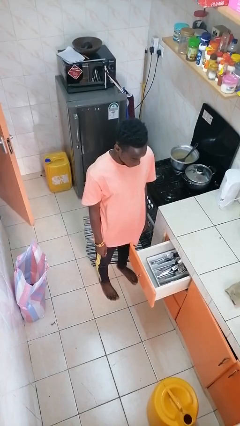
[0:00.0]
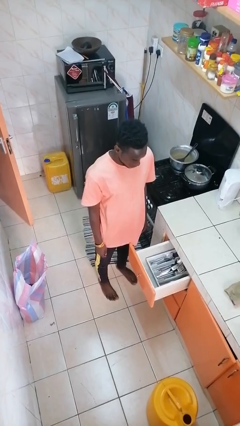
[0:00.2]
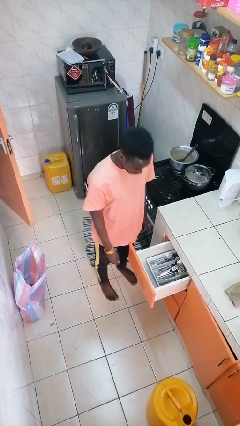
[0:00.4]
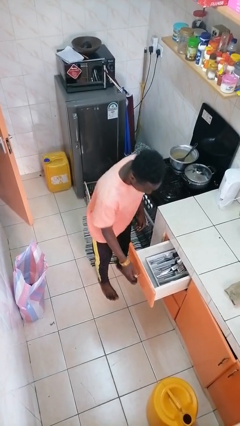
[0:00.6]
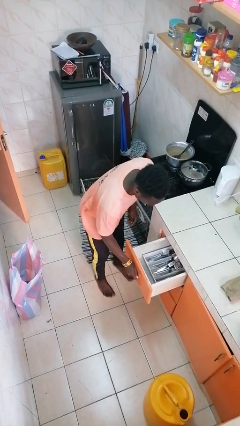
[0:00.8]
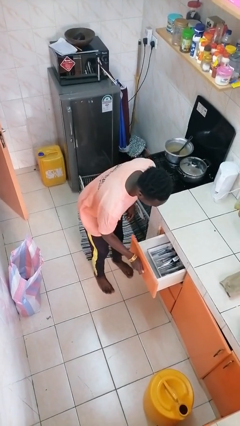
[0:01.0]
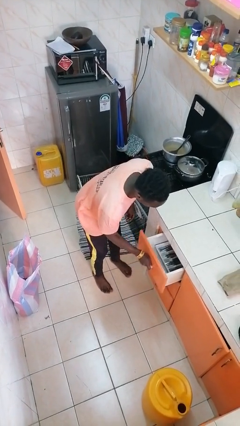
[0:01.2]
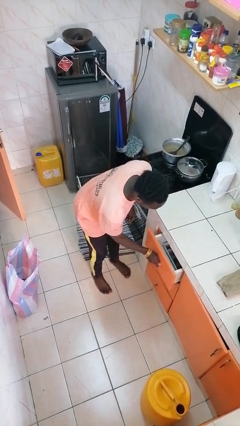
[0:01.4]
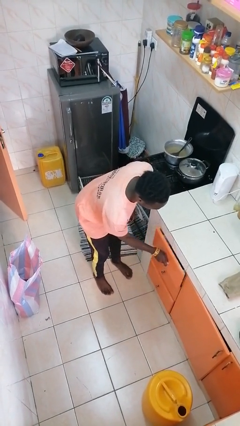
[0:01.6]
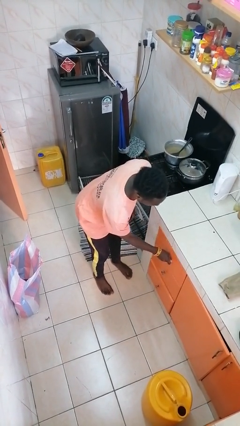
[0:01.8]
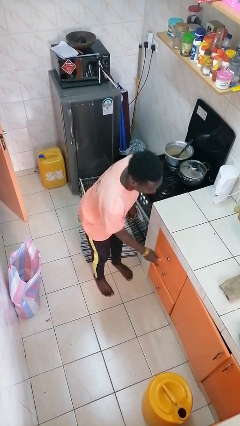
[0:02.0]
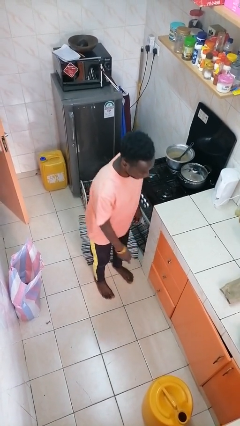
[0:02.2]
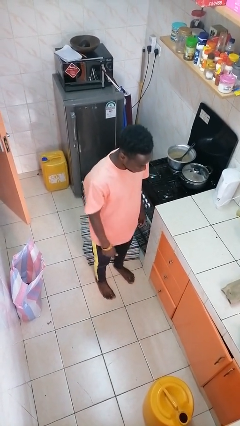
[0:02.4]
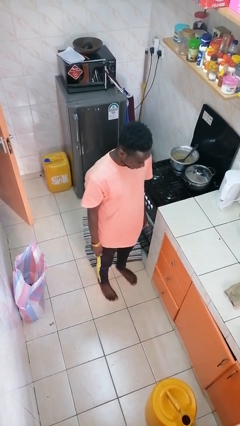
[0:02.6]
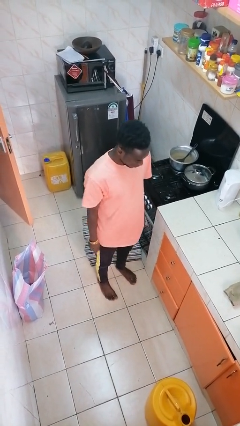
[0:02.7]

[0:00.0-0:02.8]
person closes kitchen drawer

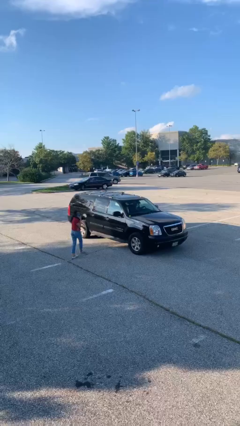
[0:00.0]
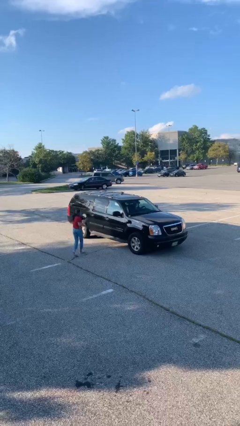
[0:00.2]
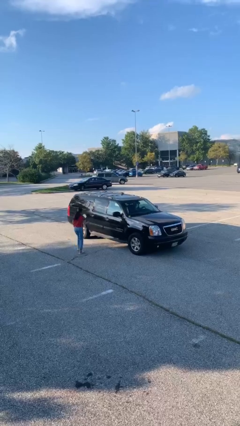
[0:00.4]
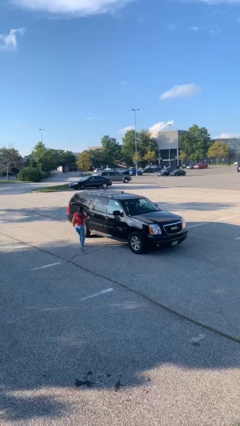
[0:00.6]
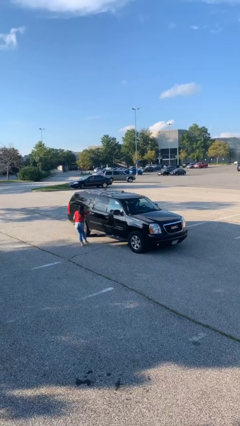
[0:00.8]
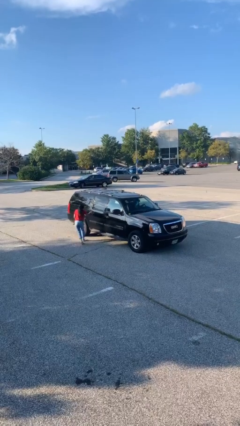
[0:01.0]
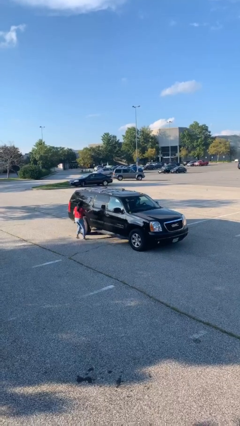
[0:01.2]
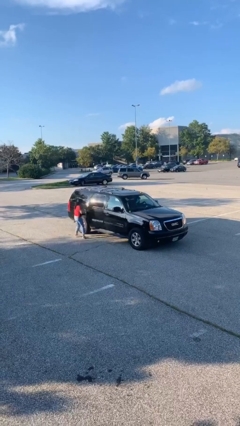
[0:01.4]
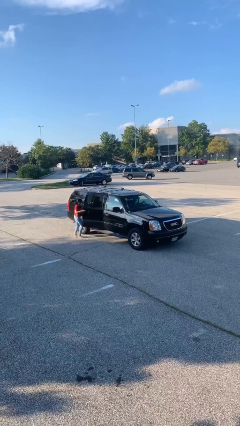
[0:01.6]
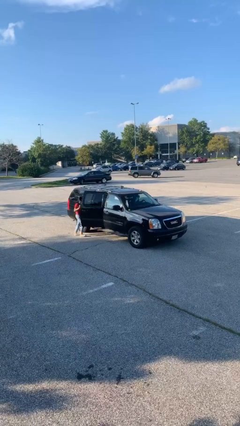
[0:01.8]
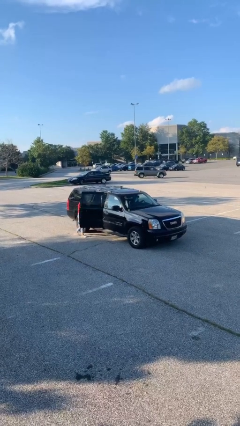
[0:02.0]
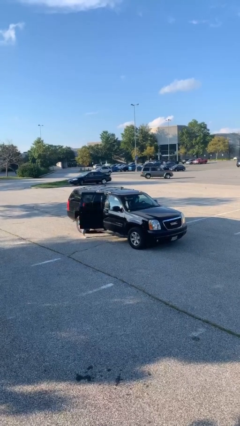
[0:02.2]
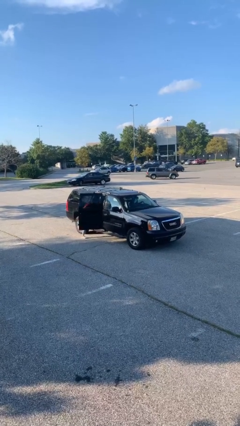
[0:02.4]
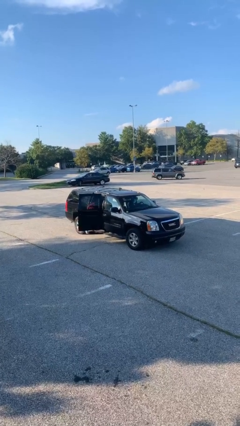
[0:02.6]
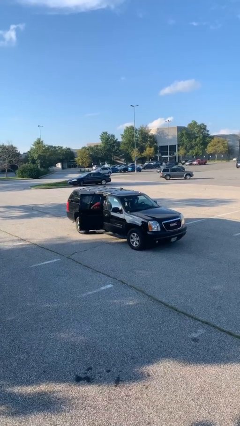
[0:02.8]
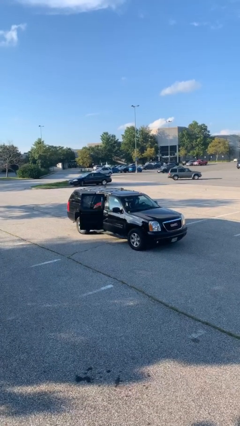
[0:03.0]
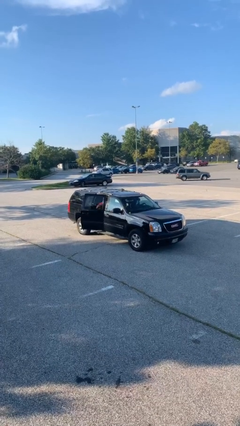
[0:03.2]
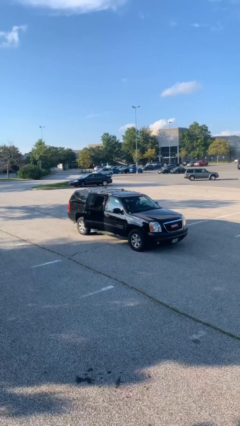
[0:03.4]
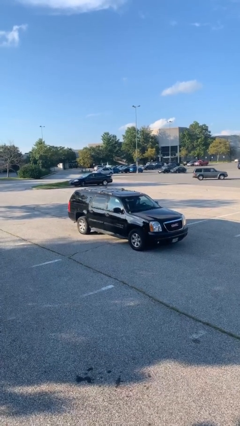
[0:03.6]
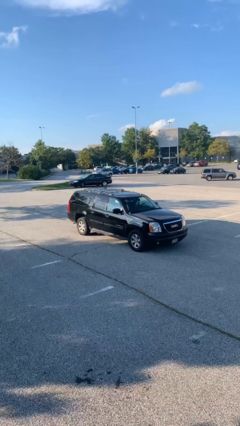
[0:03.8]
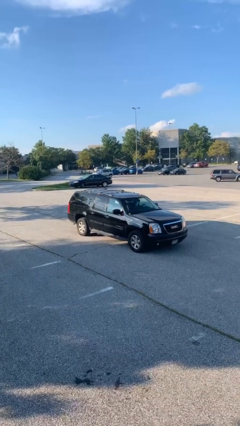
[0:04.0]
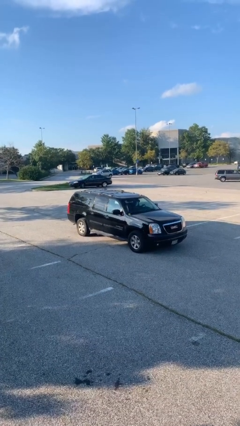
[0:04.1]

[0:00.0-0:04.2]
car picks up person

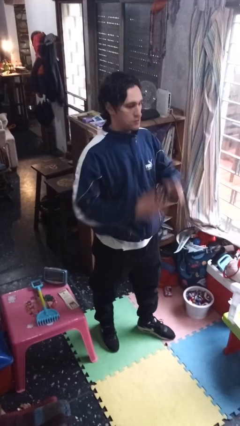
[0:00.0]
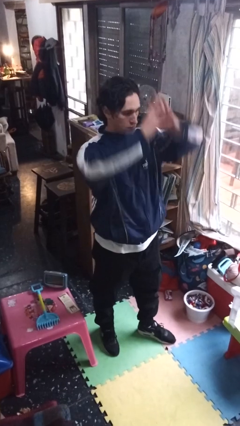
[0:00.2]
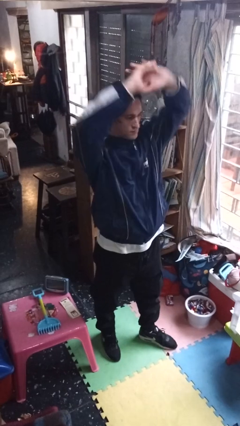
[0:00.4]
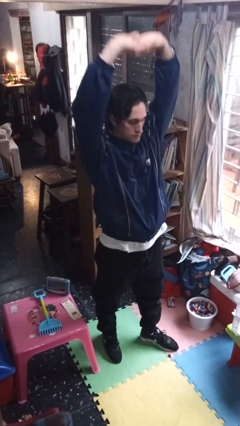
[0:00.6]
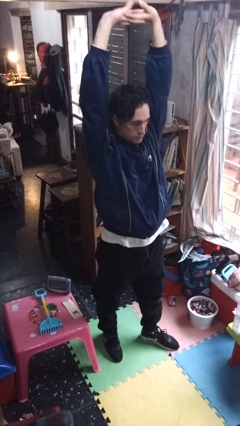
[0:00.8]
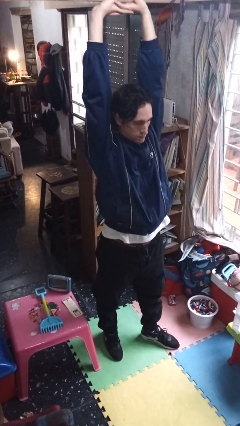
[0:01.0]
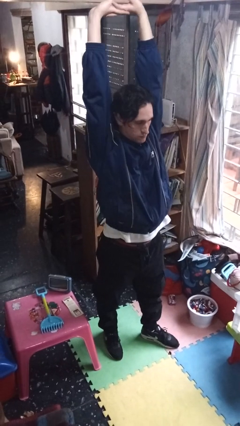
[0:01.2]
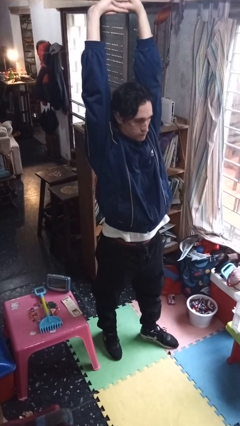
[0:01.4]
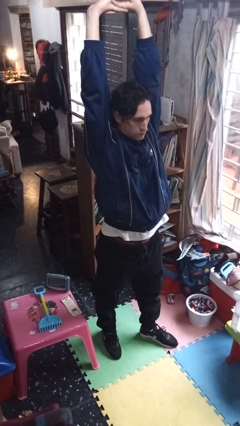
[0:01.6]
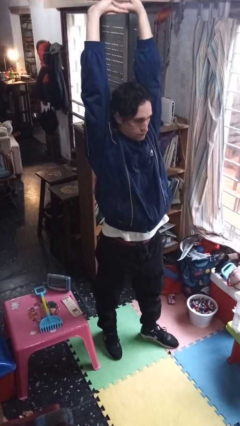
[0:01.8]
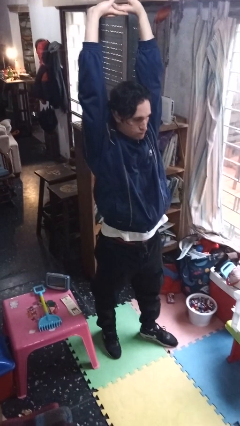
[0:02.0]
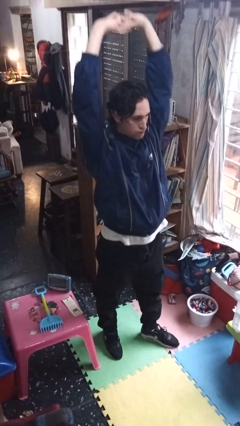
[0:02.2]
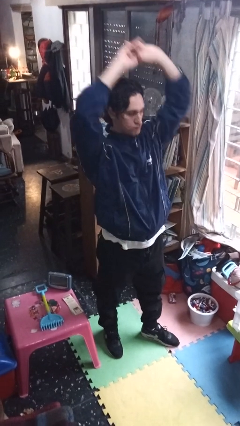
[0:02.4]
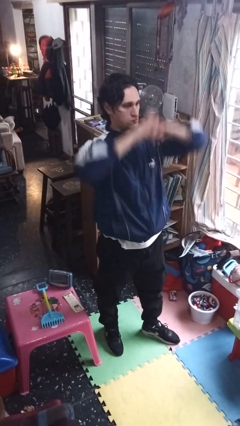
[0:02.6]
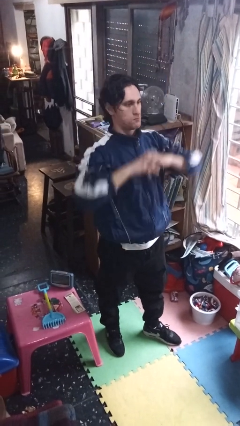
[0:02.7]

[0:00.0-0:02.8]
person stretches arms over head

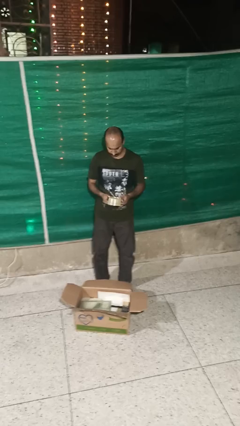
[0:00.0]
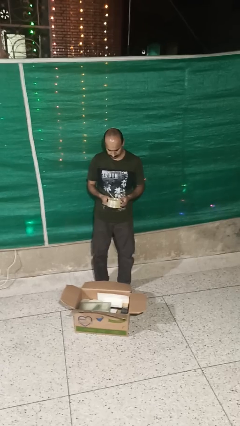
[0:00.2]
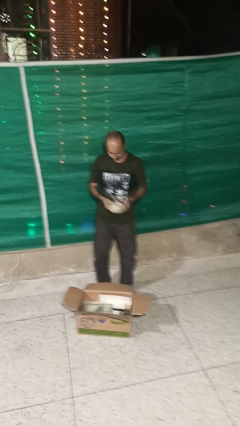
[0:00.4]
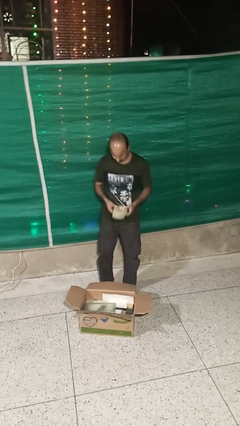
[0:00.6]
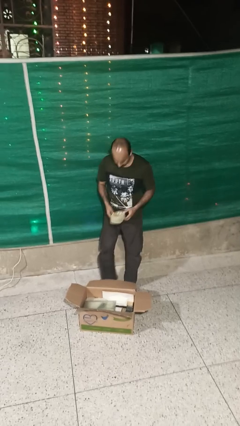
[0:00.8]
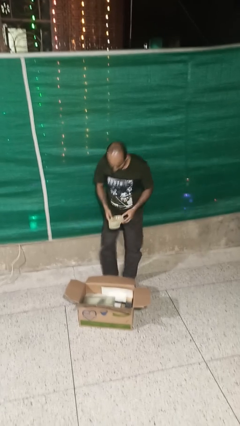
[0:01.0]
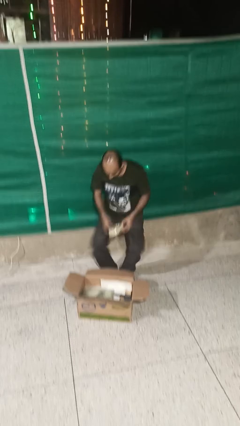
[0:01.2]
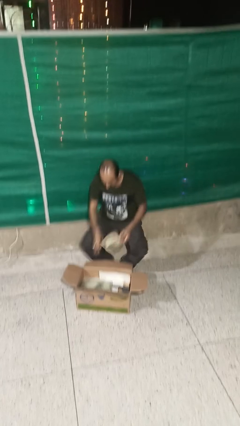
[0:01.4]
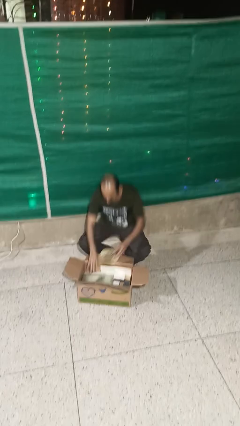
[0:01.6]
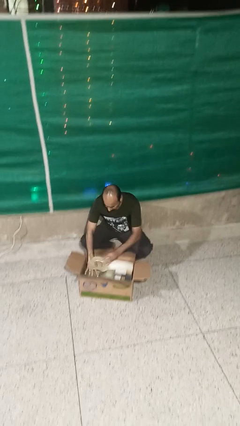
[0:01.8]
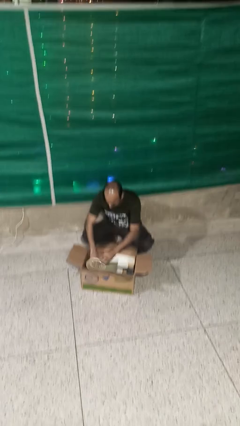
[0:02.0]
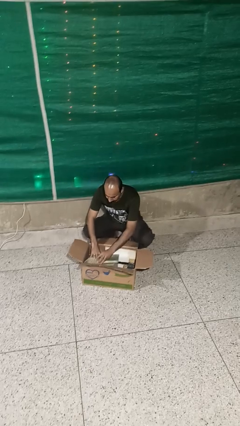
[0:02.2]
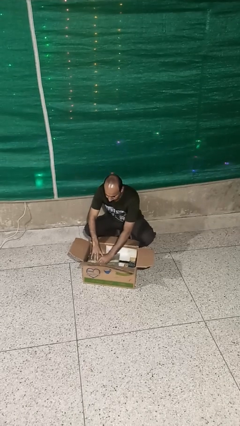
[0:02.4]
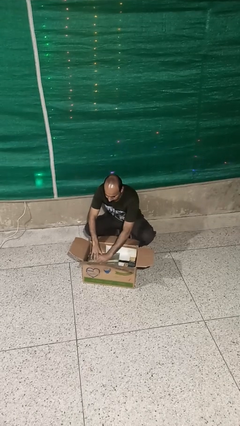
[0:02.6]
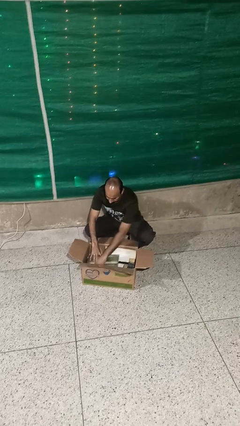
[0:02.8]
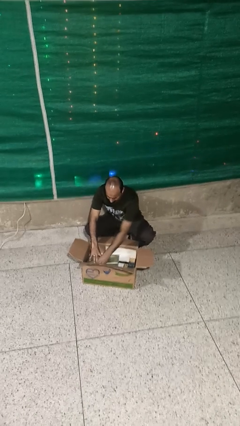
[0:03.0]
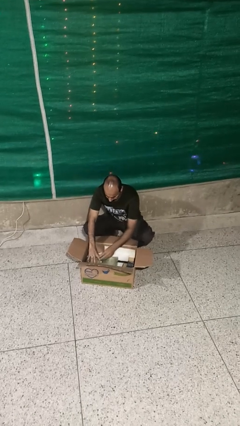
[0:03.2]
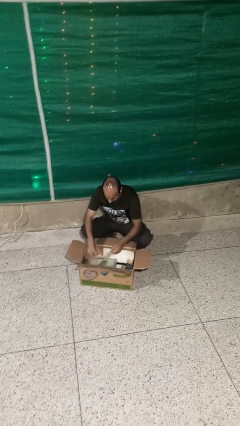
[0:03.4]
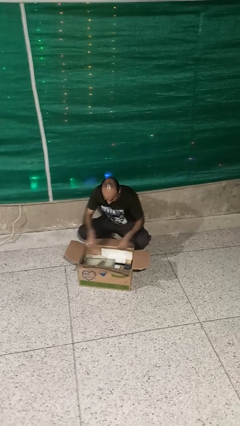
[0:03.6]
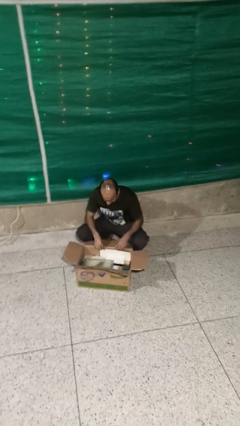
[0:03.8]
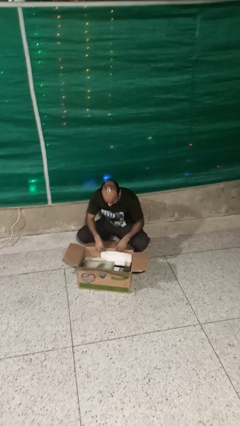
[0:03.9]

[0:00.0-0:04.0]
person puts object into box

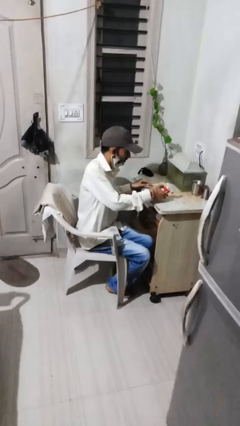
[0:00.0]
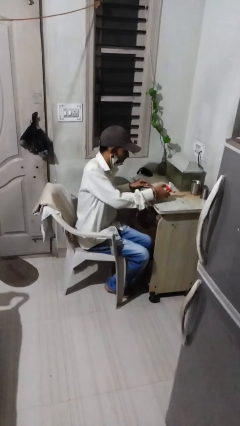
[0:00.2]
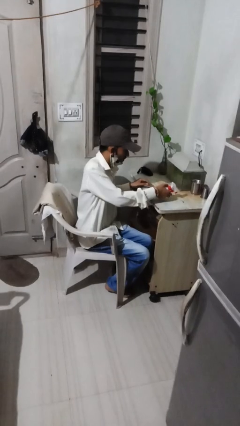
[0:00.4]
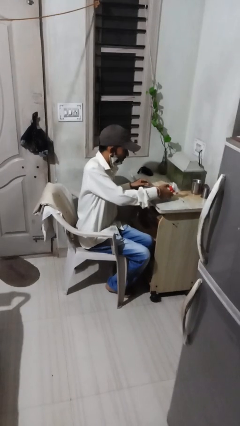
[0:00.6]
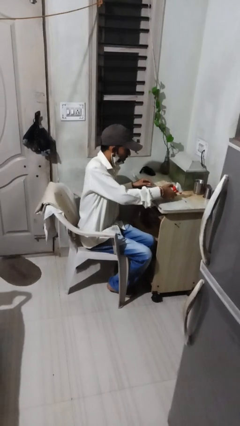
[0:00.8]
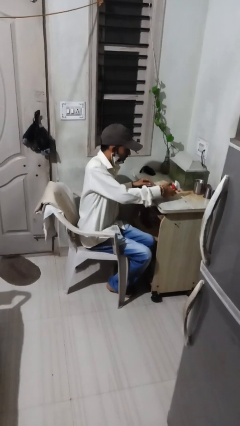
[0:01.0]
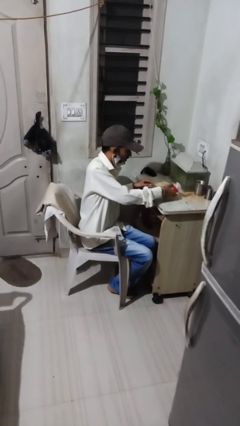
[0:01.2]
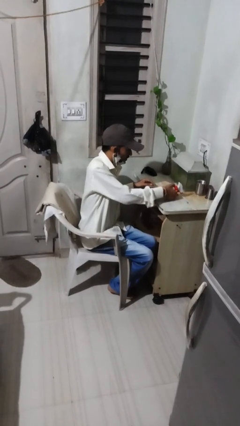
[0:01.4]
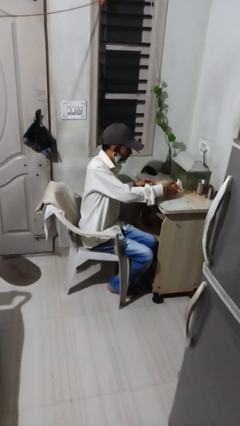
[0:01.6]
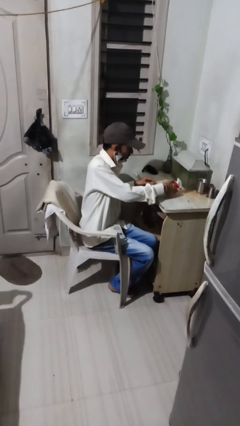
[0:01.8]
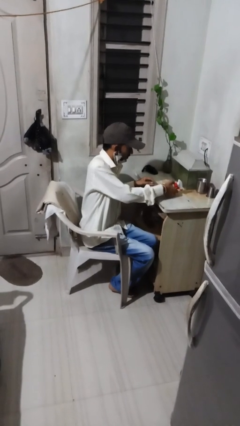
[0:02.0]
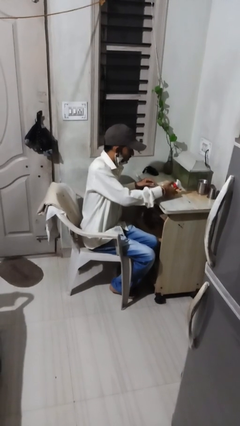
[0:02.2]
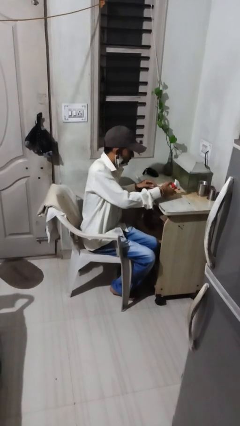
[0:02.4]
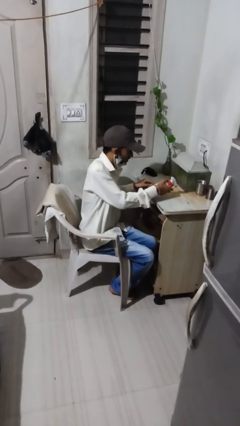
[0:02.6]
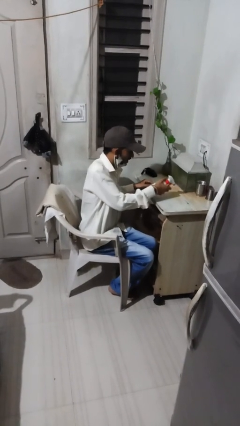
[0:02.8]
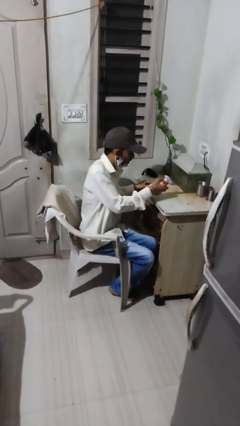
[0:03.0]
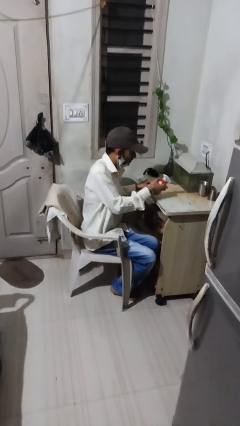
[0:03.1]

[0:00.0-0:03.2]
person sprays from bottle

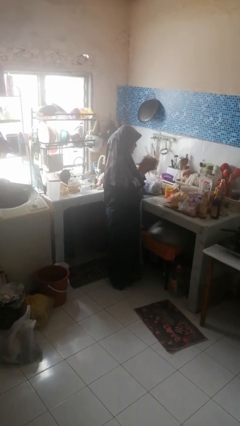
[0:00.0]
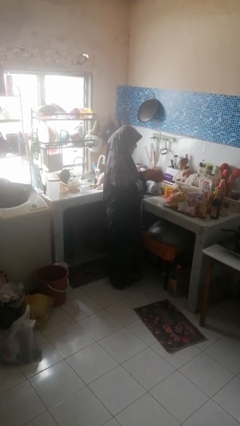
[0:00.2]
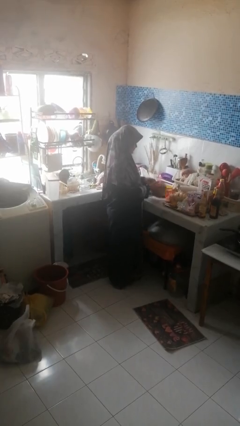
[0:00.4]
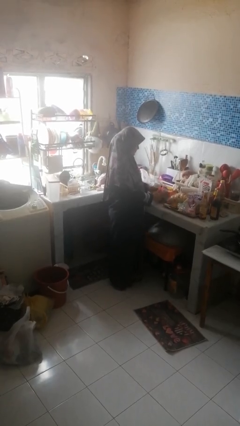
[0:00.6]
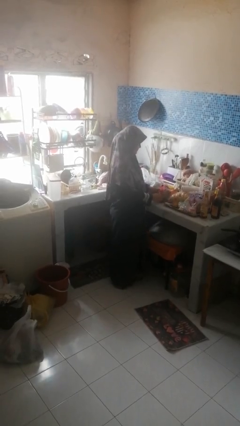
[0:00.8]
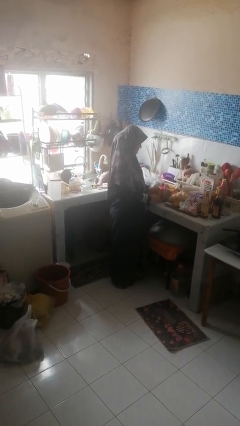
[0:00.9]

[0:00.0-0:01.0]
person puts down object on countertop
